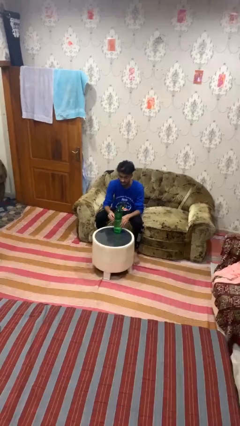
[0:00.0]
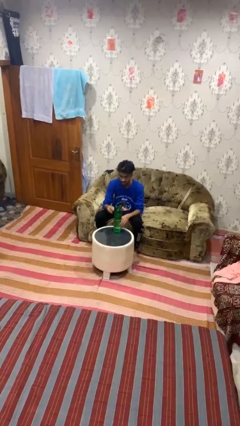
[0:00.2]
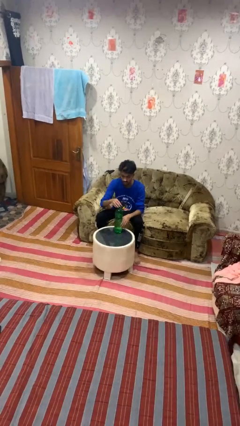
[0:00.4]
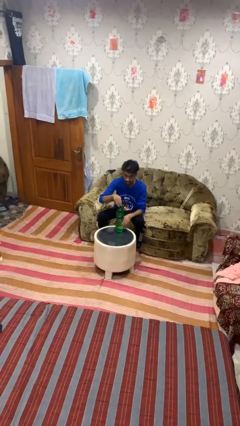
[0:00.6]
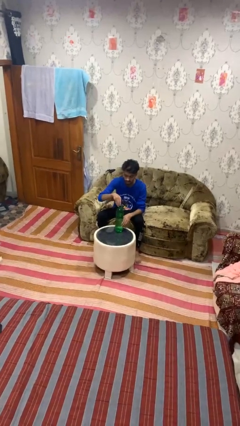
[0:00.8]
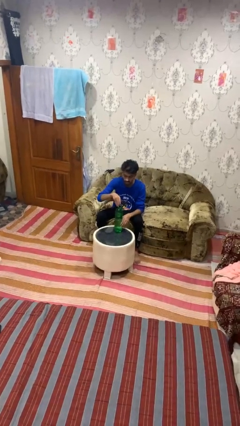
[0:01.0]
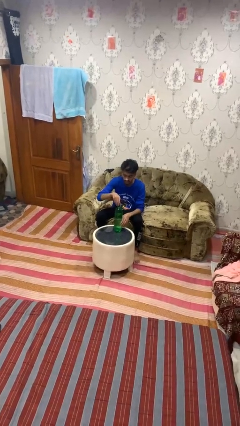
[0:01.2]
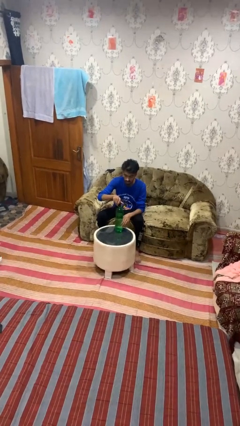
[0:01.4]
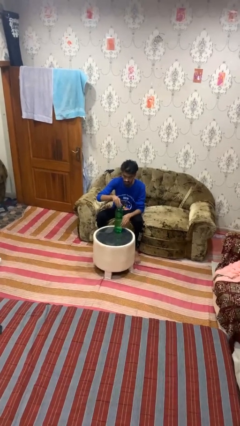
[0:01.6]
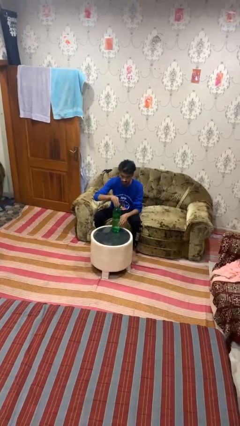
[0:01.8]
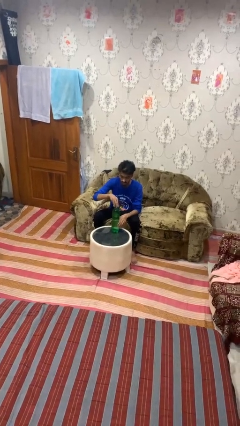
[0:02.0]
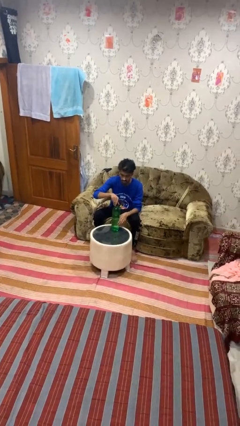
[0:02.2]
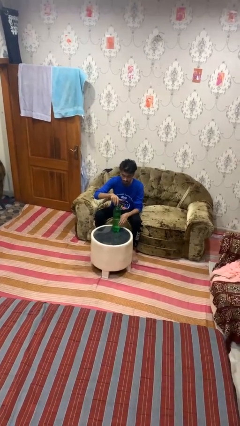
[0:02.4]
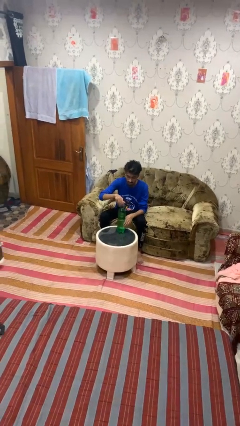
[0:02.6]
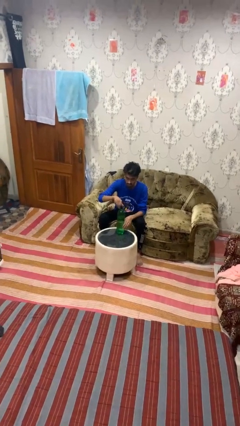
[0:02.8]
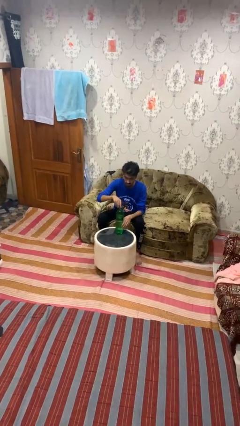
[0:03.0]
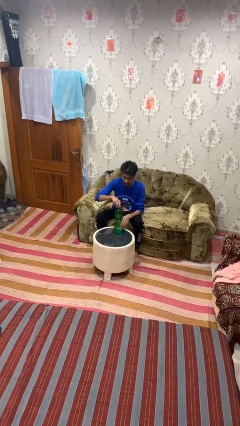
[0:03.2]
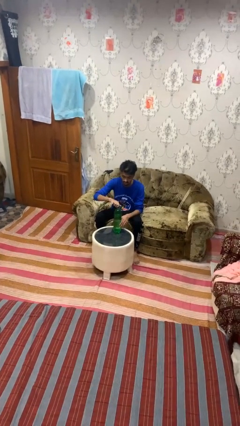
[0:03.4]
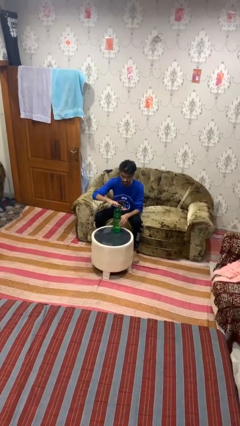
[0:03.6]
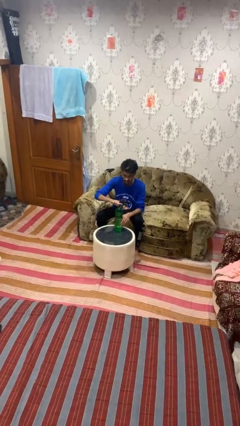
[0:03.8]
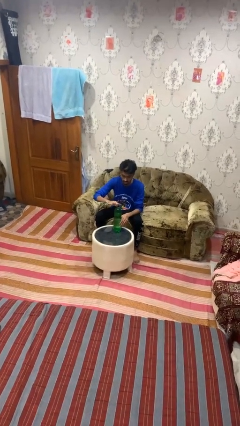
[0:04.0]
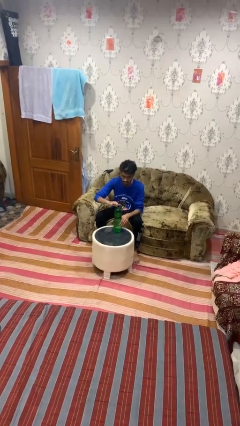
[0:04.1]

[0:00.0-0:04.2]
person screws lid to bottle

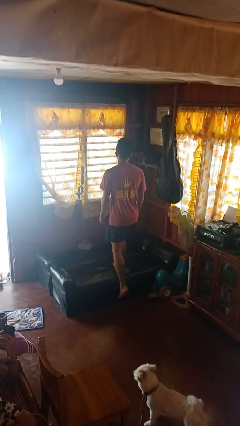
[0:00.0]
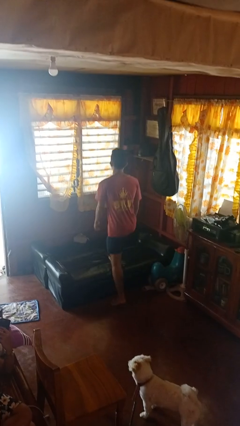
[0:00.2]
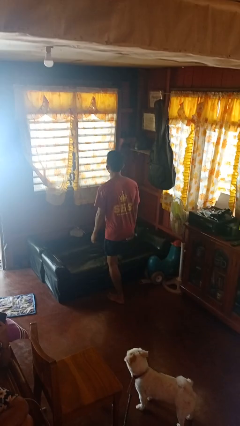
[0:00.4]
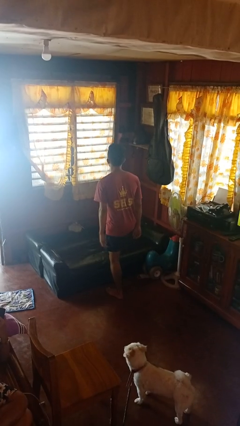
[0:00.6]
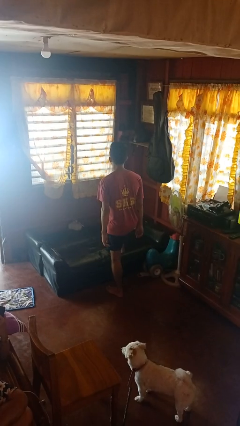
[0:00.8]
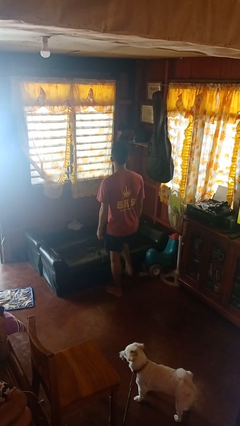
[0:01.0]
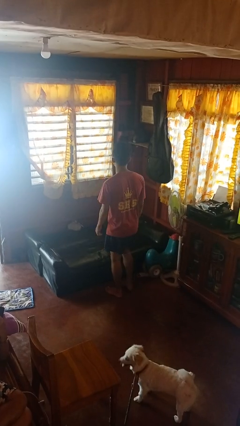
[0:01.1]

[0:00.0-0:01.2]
person climbs off couch

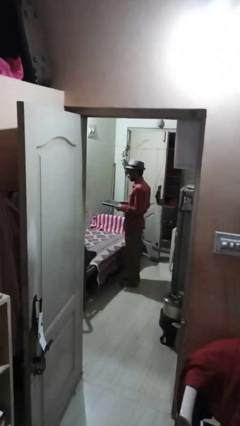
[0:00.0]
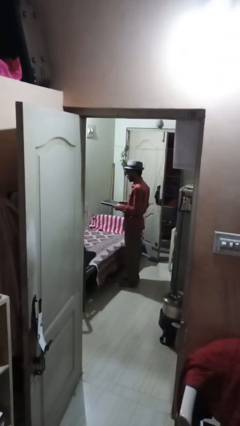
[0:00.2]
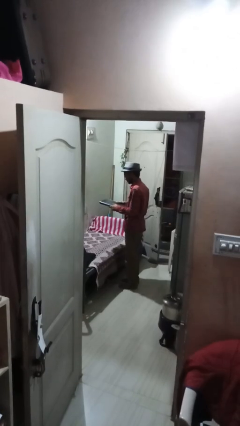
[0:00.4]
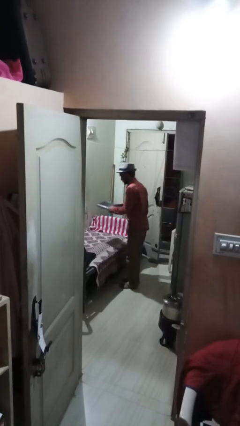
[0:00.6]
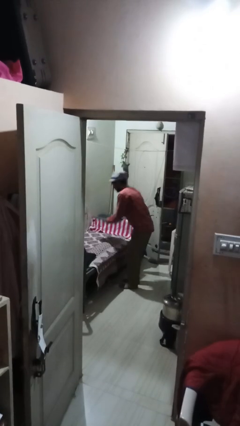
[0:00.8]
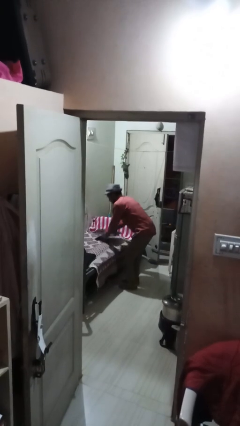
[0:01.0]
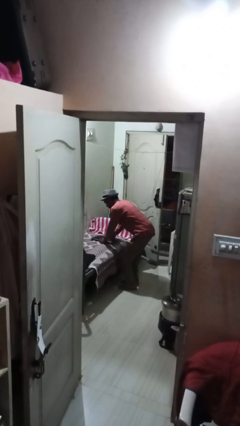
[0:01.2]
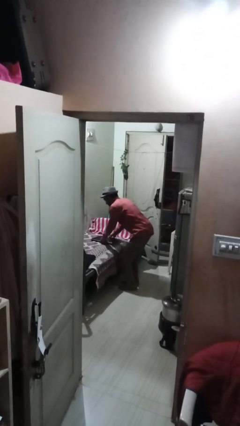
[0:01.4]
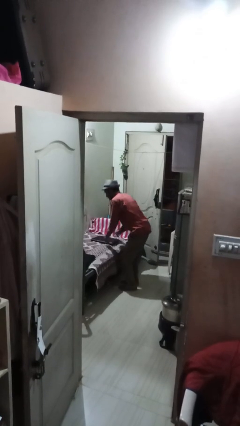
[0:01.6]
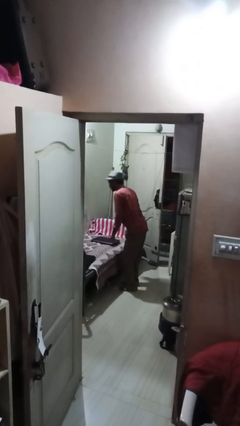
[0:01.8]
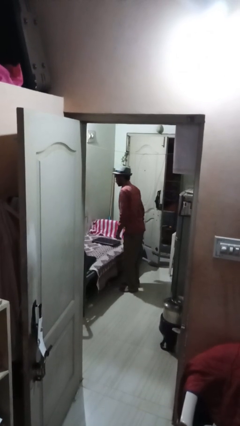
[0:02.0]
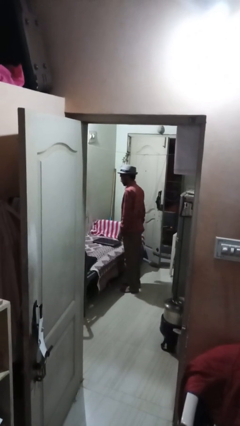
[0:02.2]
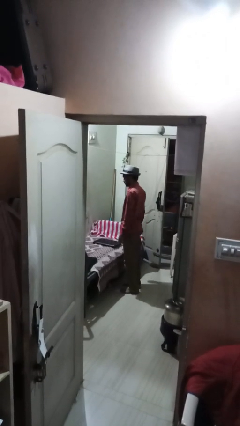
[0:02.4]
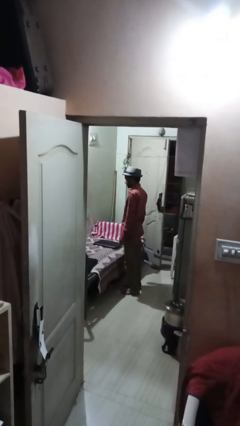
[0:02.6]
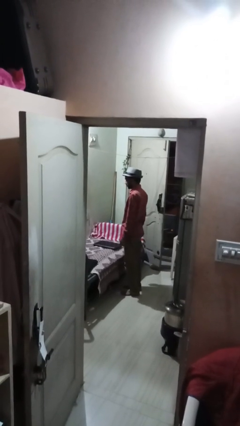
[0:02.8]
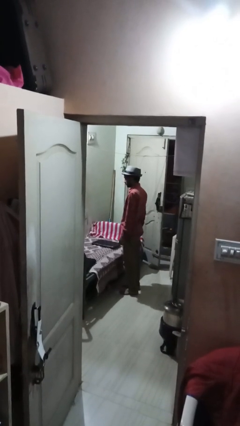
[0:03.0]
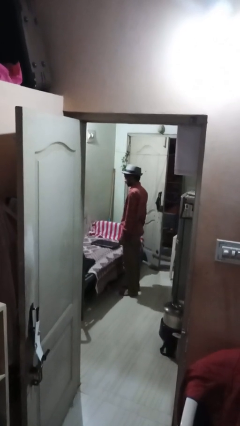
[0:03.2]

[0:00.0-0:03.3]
person puts down object on couch

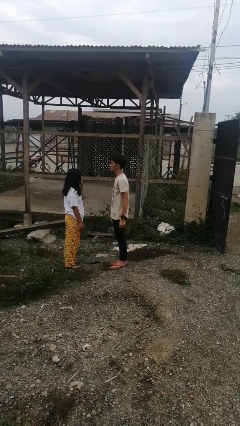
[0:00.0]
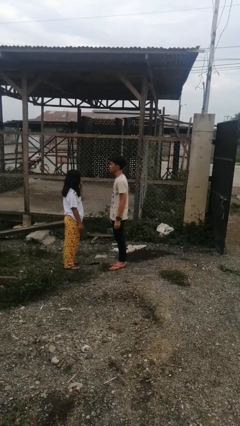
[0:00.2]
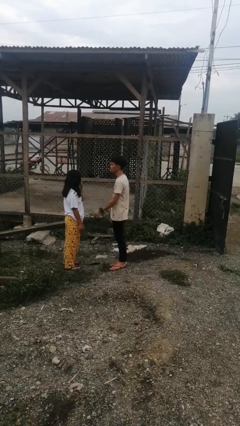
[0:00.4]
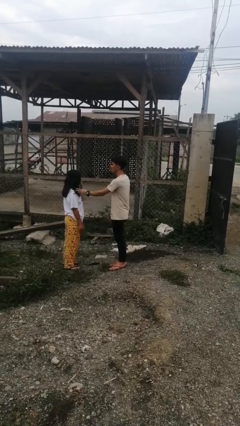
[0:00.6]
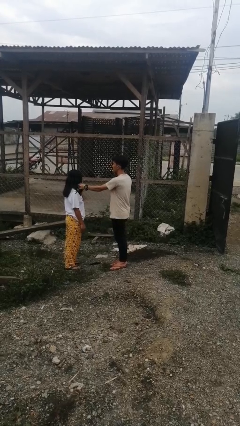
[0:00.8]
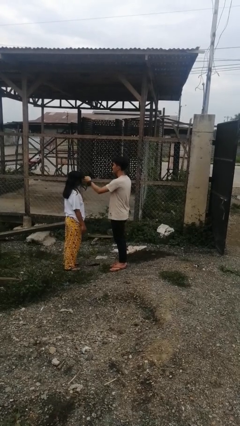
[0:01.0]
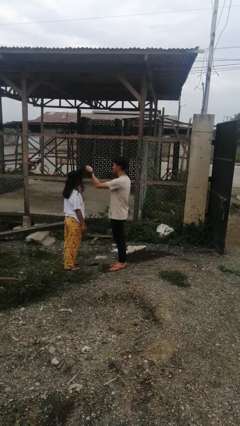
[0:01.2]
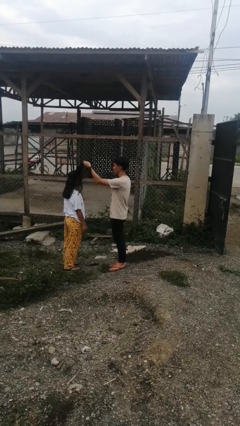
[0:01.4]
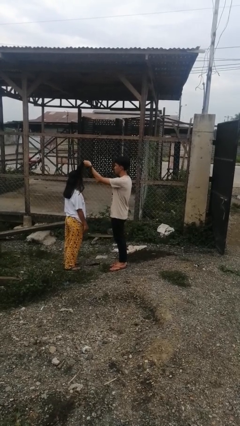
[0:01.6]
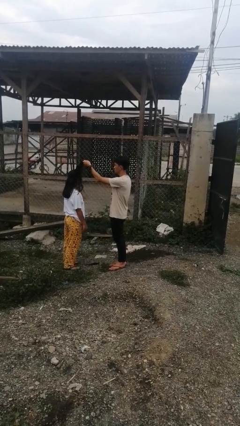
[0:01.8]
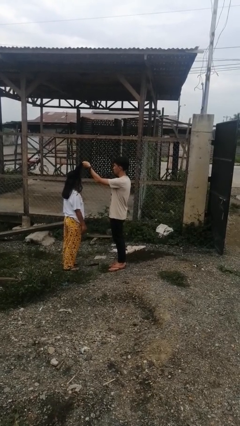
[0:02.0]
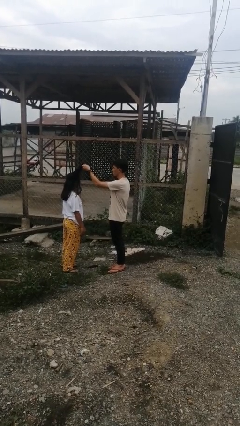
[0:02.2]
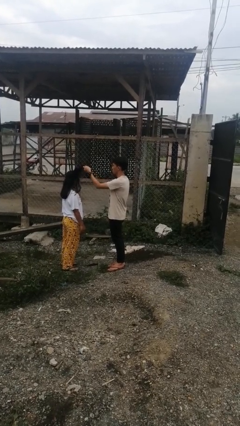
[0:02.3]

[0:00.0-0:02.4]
person grabs person by hair

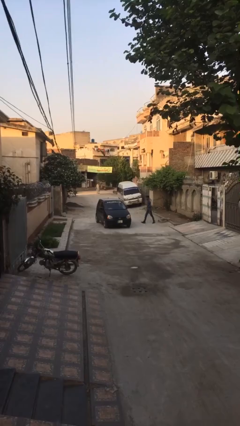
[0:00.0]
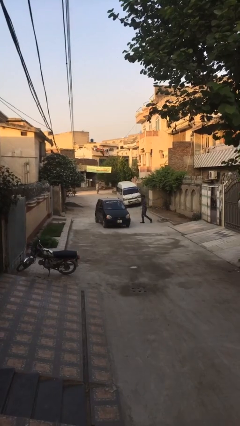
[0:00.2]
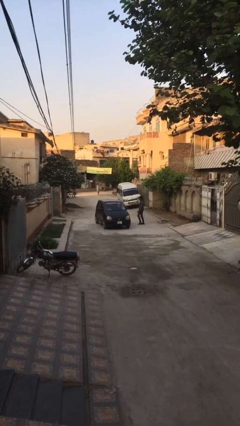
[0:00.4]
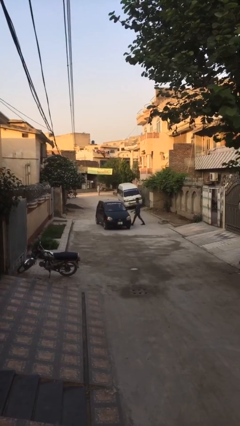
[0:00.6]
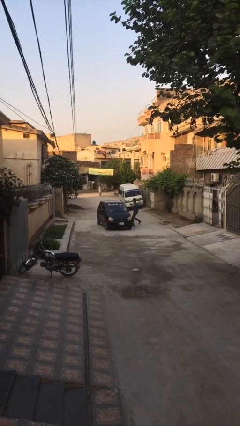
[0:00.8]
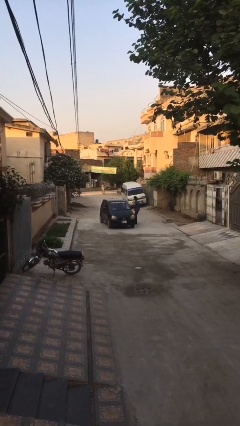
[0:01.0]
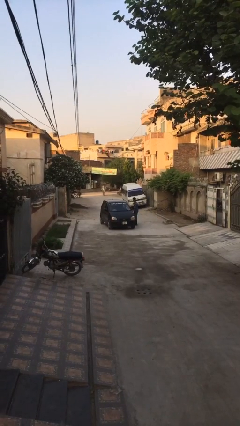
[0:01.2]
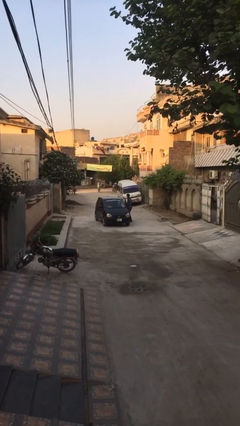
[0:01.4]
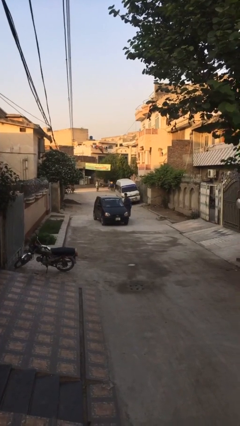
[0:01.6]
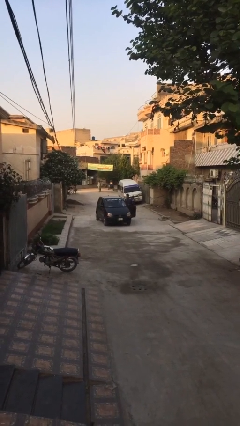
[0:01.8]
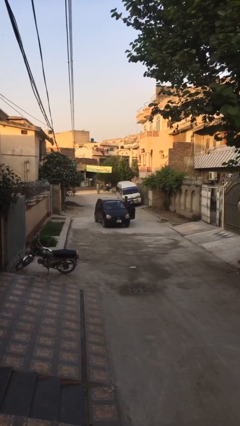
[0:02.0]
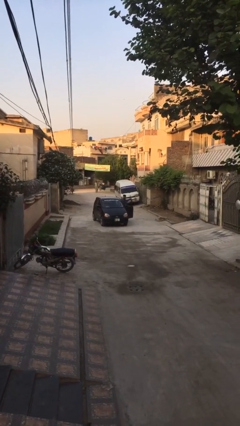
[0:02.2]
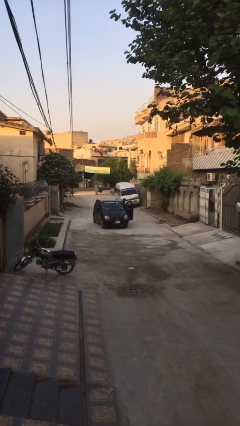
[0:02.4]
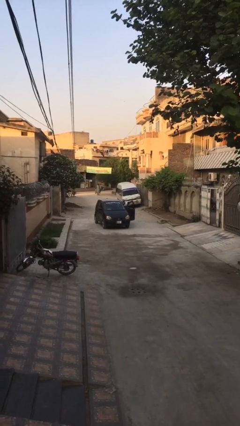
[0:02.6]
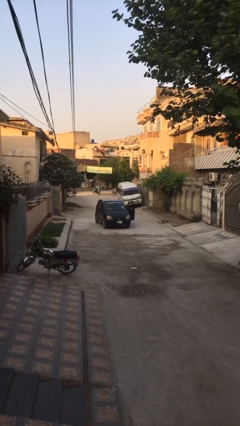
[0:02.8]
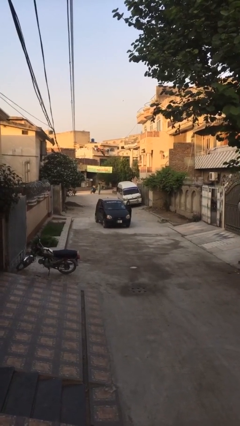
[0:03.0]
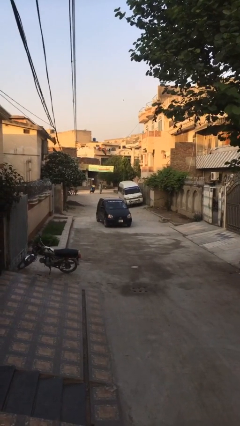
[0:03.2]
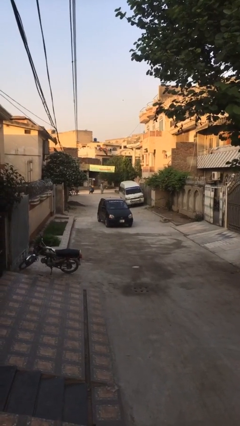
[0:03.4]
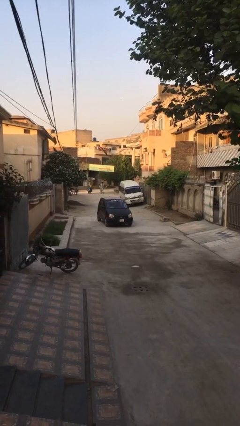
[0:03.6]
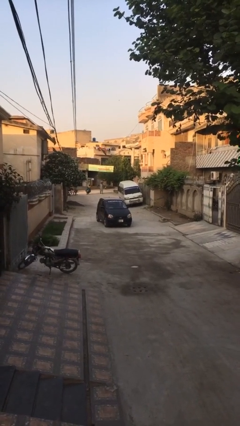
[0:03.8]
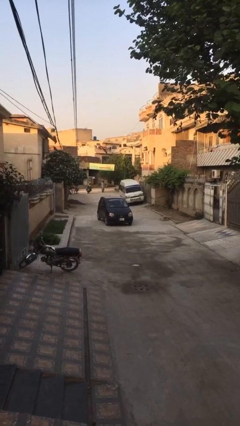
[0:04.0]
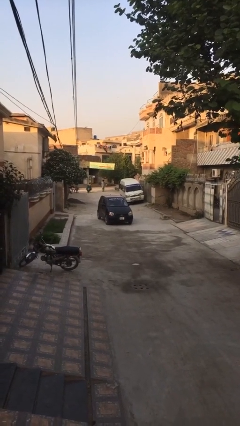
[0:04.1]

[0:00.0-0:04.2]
car picks up person

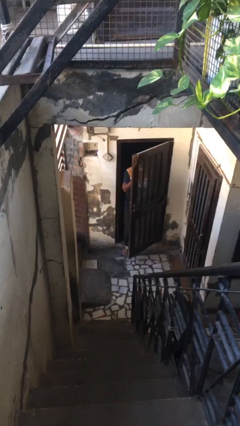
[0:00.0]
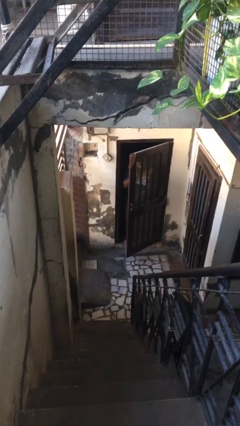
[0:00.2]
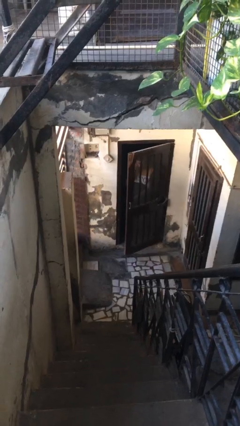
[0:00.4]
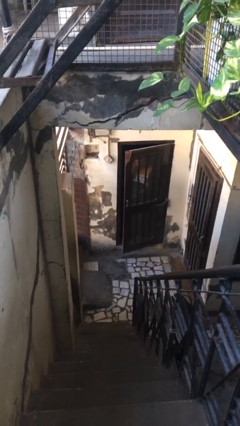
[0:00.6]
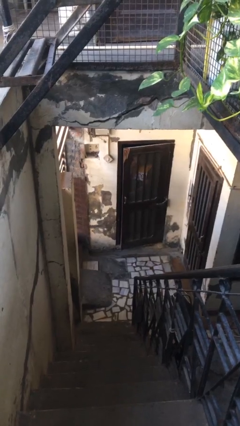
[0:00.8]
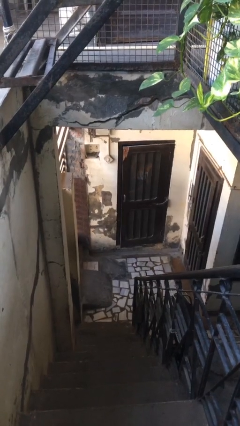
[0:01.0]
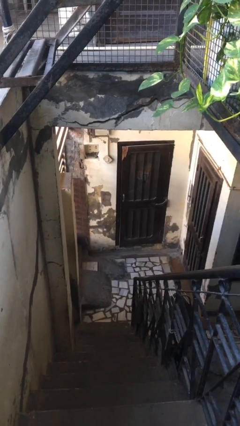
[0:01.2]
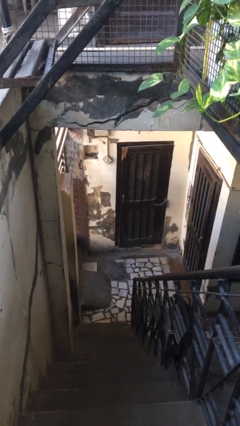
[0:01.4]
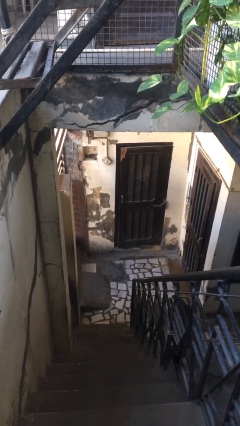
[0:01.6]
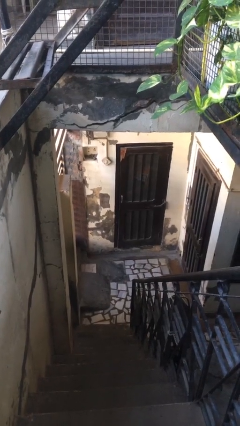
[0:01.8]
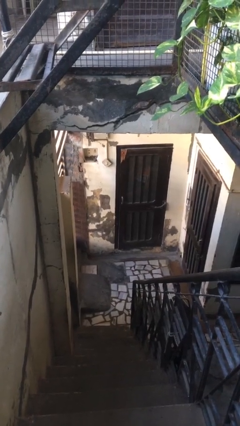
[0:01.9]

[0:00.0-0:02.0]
person closes facility door
